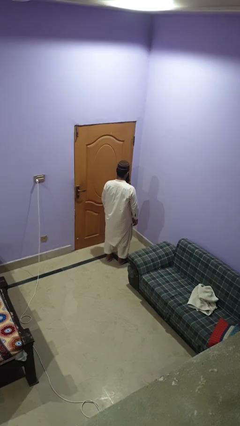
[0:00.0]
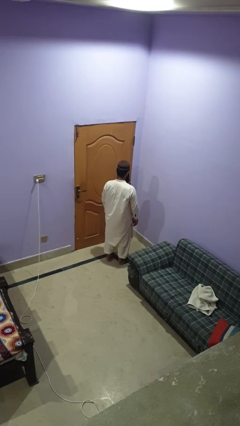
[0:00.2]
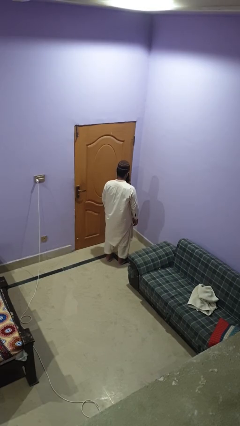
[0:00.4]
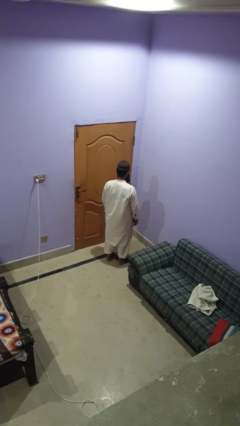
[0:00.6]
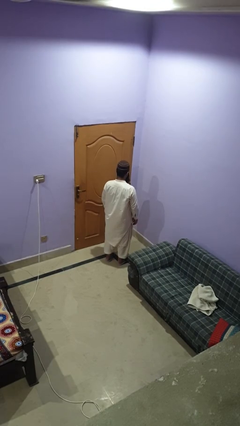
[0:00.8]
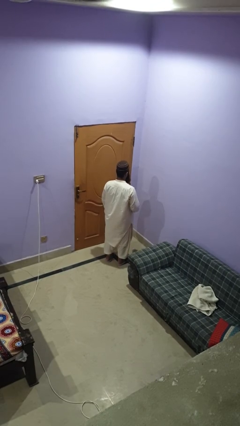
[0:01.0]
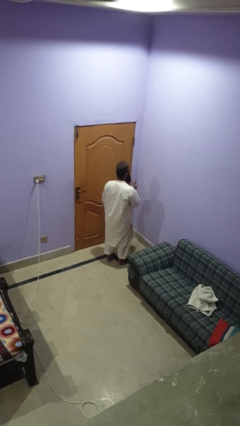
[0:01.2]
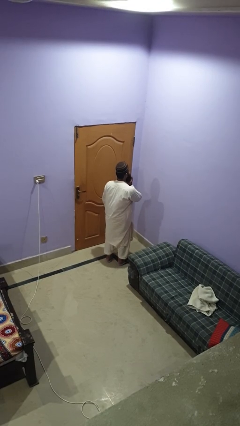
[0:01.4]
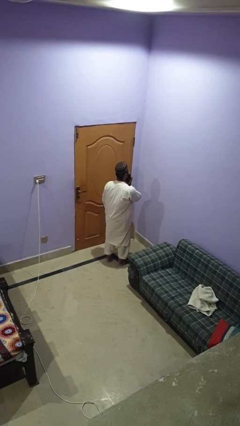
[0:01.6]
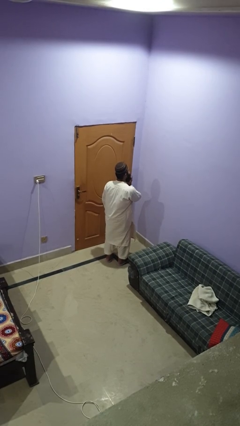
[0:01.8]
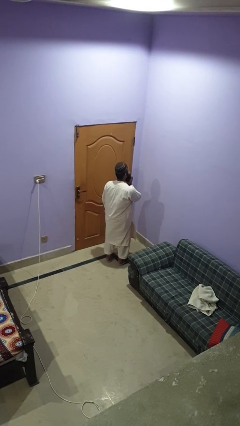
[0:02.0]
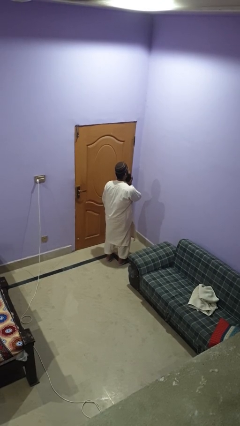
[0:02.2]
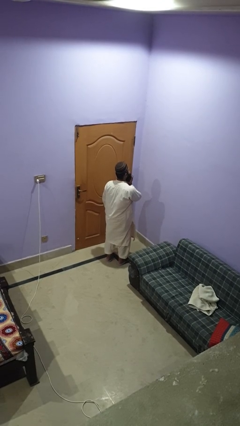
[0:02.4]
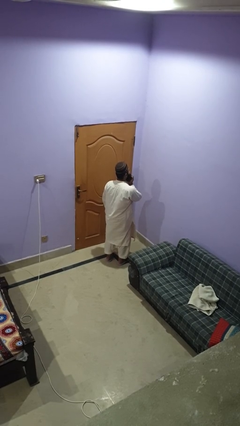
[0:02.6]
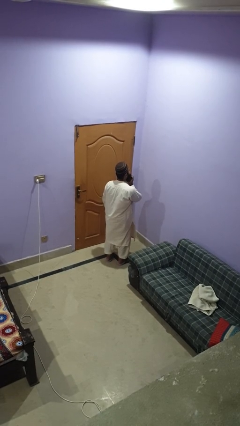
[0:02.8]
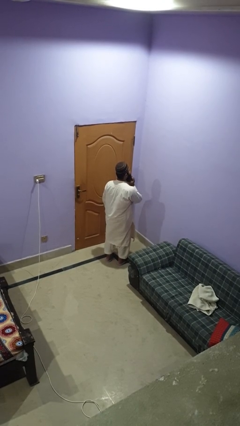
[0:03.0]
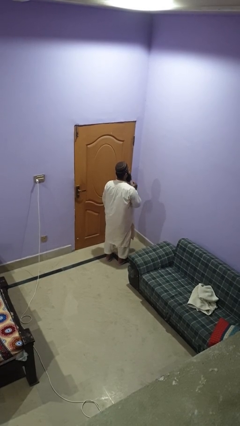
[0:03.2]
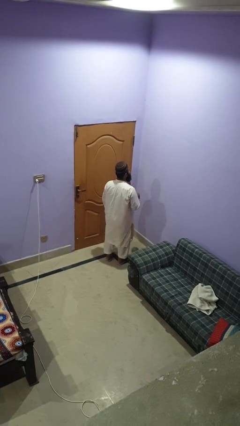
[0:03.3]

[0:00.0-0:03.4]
person strokes chin

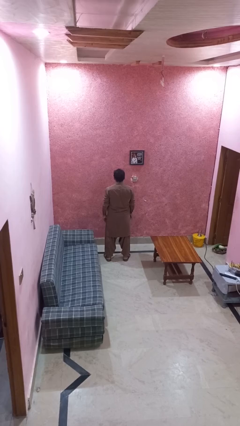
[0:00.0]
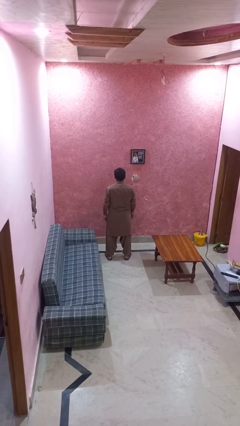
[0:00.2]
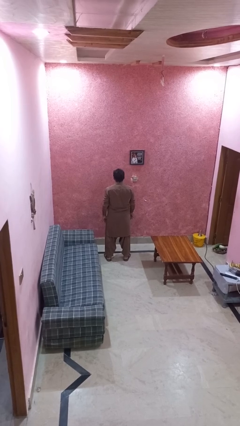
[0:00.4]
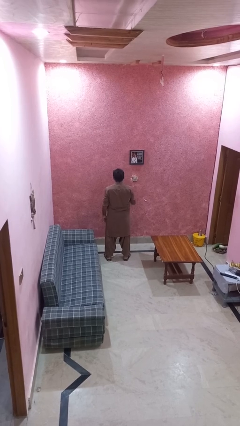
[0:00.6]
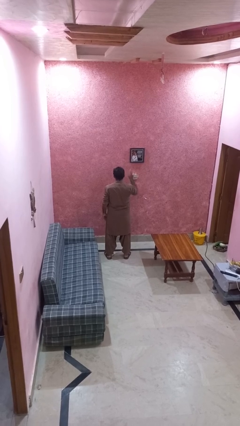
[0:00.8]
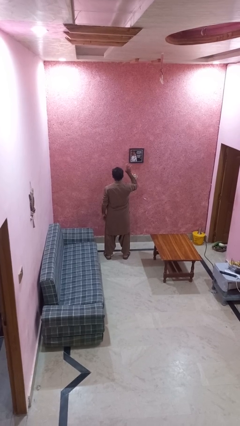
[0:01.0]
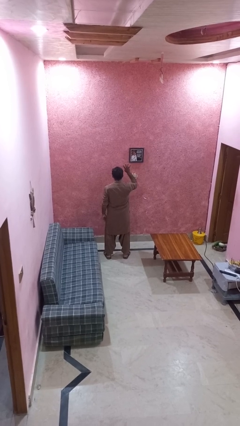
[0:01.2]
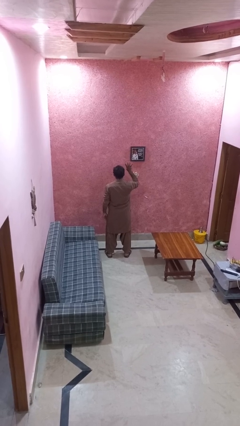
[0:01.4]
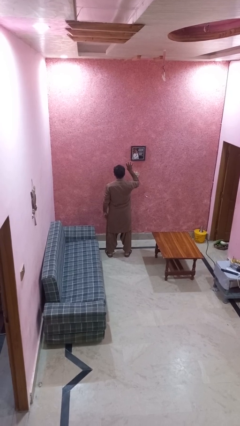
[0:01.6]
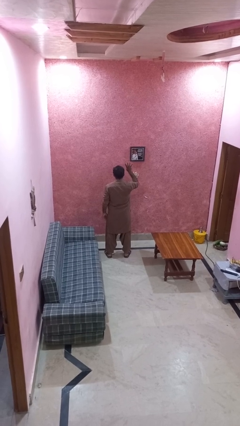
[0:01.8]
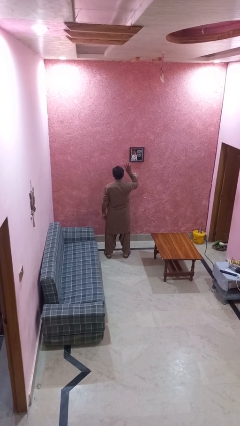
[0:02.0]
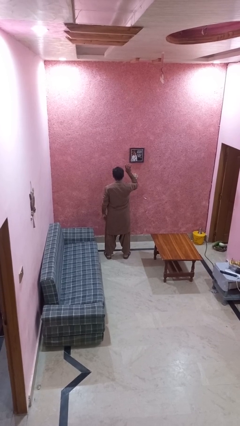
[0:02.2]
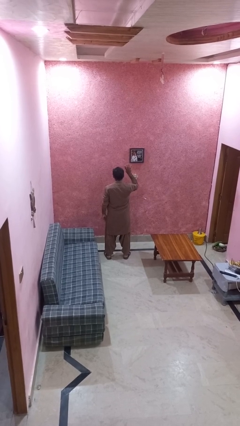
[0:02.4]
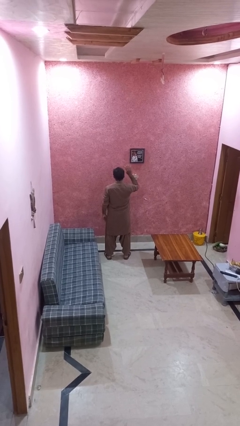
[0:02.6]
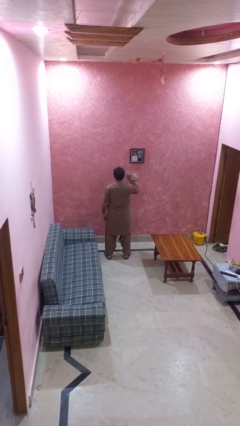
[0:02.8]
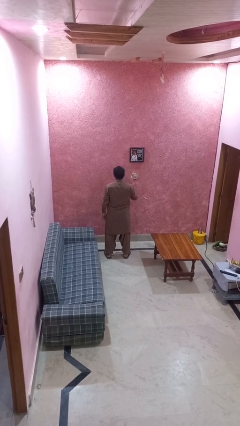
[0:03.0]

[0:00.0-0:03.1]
person gestures number four

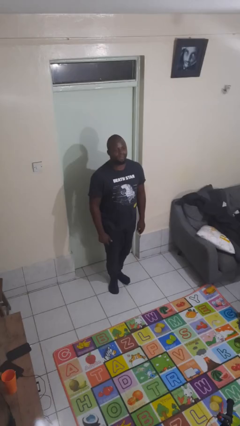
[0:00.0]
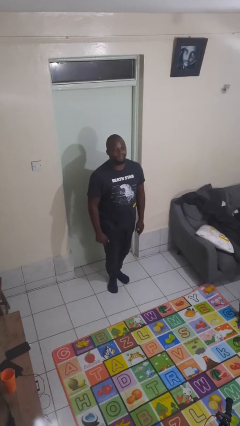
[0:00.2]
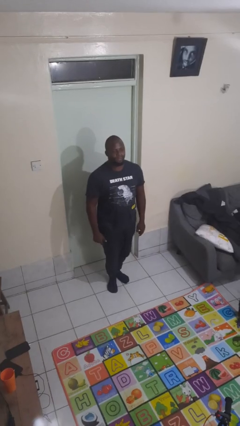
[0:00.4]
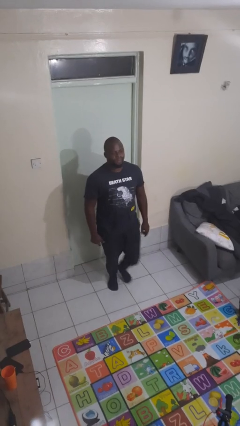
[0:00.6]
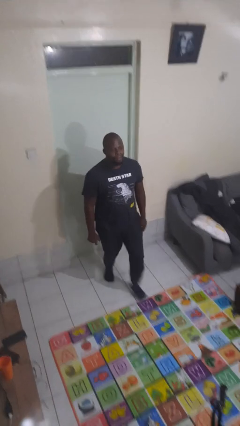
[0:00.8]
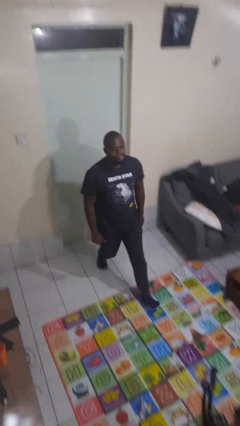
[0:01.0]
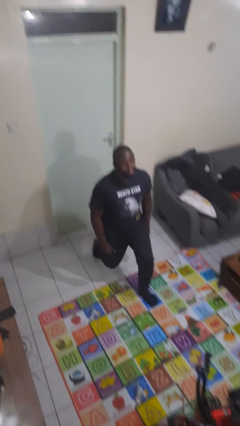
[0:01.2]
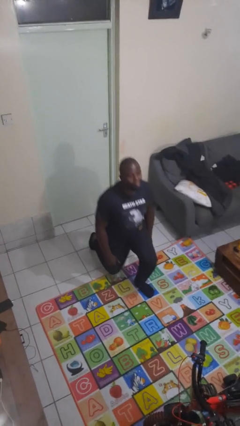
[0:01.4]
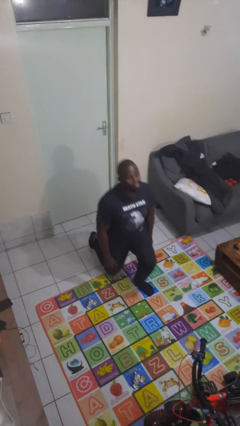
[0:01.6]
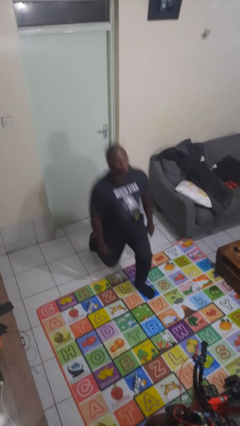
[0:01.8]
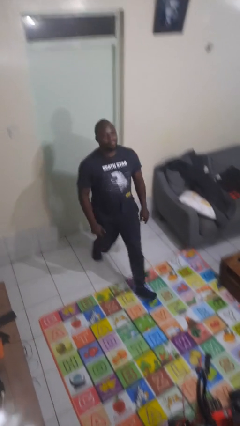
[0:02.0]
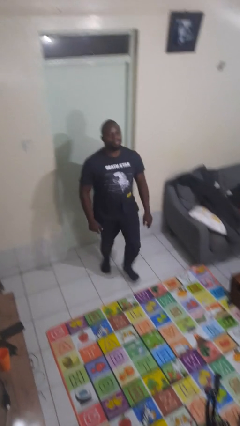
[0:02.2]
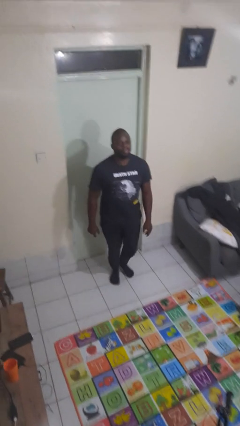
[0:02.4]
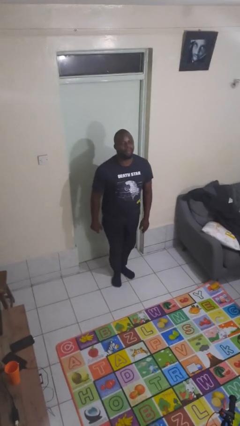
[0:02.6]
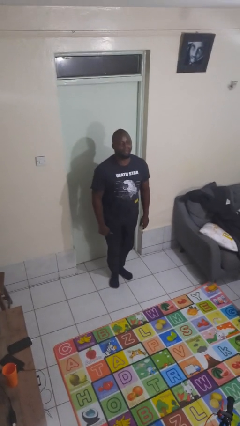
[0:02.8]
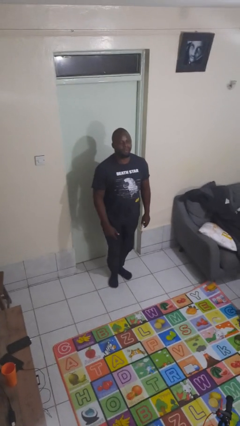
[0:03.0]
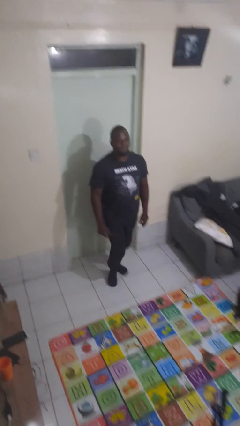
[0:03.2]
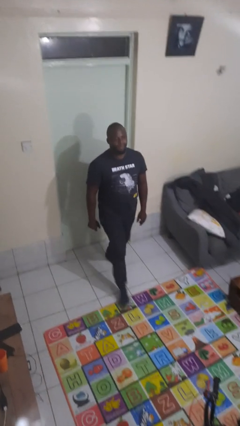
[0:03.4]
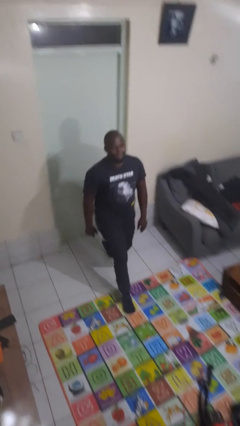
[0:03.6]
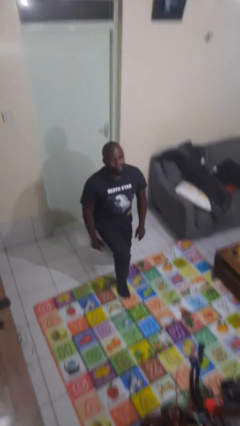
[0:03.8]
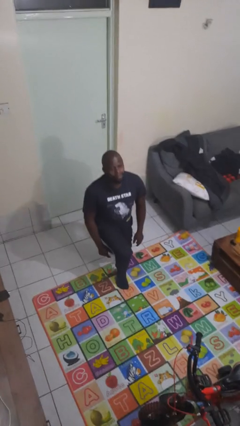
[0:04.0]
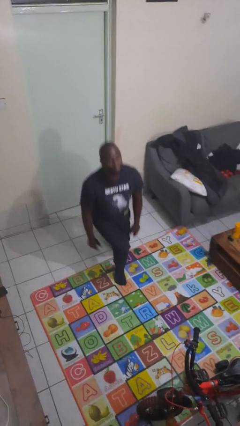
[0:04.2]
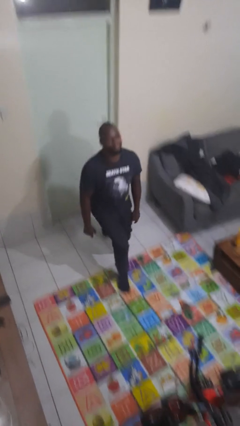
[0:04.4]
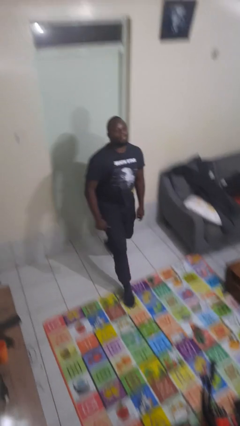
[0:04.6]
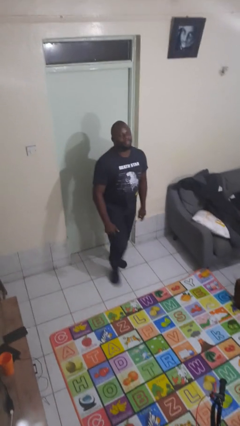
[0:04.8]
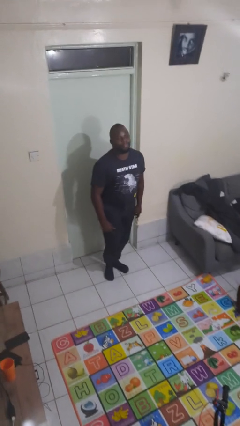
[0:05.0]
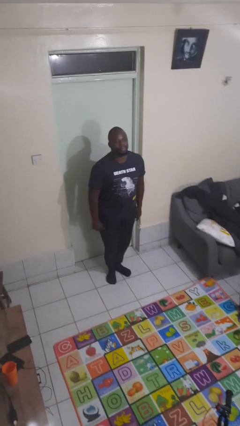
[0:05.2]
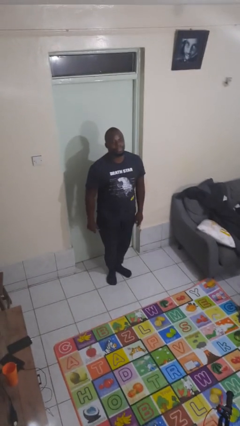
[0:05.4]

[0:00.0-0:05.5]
person exercises with lunges

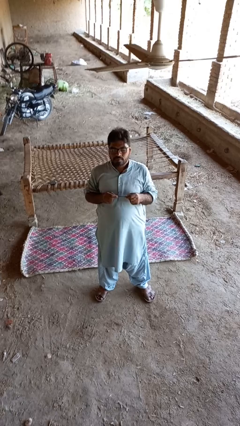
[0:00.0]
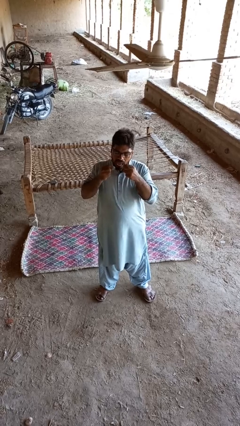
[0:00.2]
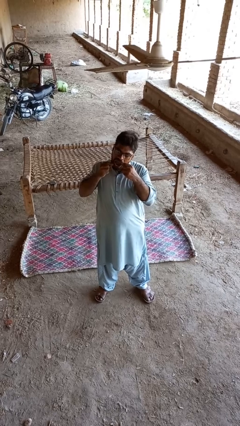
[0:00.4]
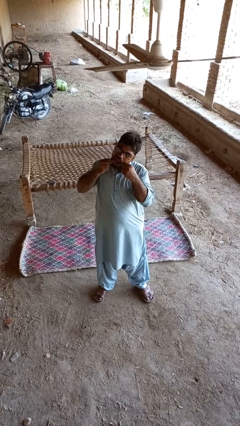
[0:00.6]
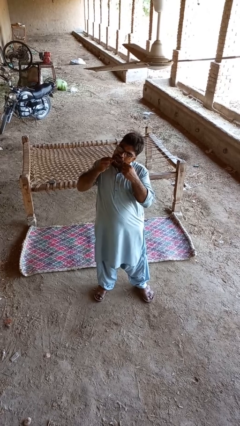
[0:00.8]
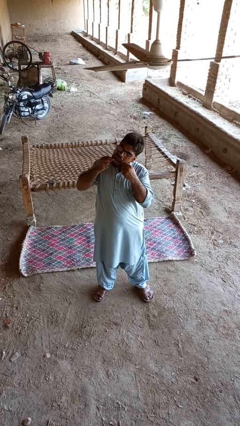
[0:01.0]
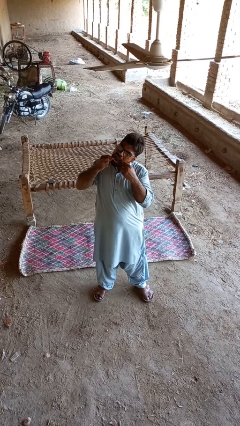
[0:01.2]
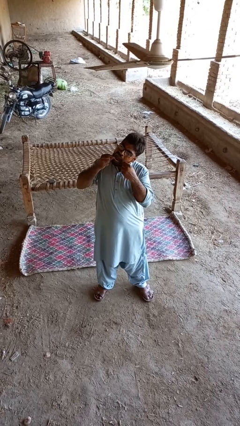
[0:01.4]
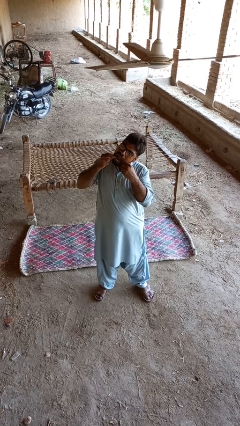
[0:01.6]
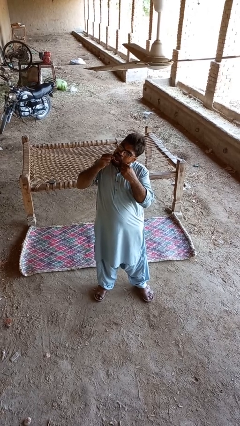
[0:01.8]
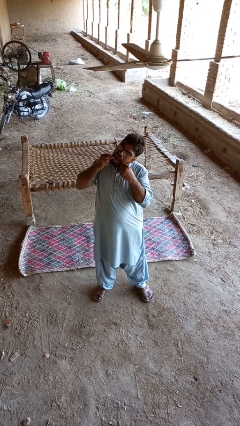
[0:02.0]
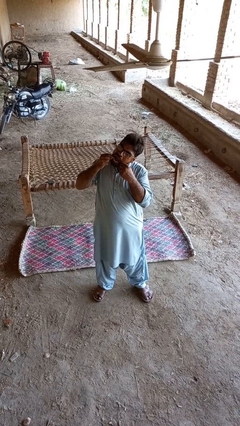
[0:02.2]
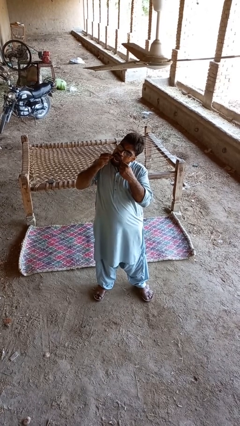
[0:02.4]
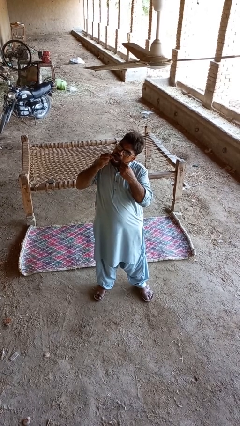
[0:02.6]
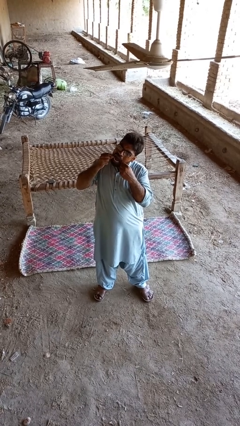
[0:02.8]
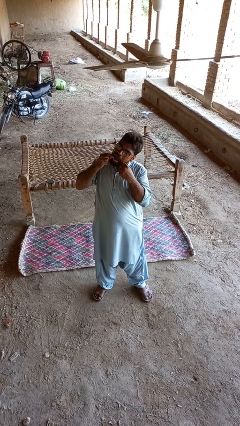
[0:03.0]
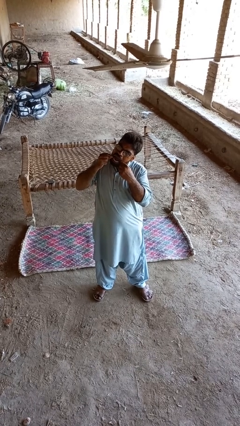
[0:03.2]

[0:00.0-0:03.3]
person flosses

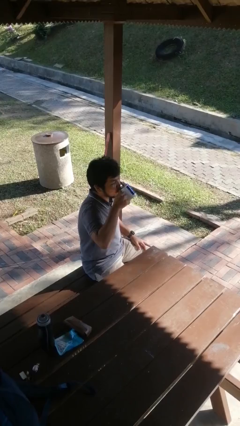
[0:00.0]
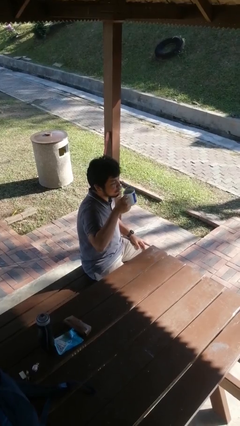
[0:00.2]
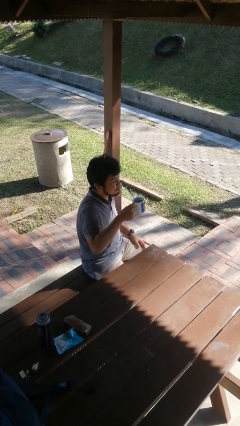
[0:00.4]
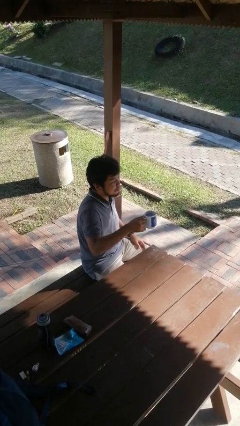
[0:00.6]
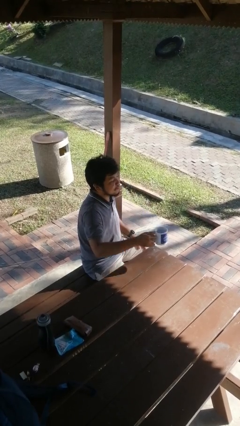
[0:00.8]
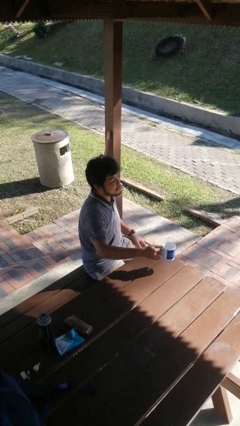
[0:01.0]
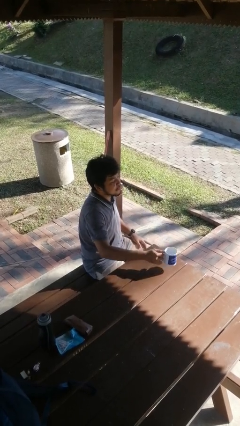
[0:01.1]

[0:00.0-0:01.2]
person puts down object on table

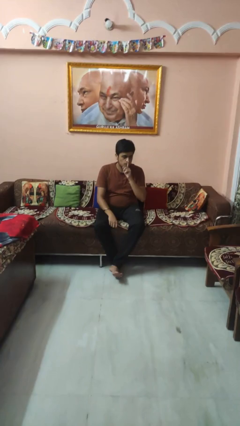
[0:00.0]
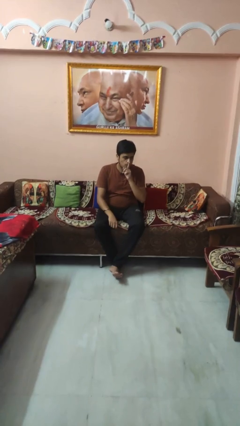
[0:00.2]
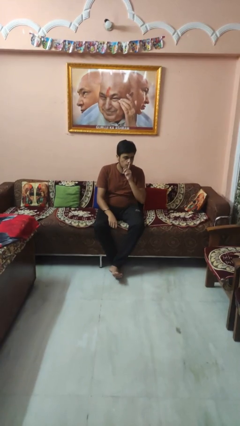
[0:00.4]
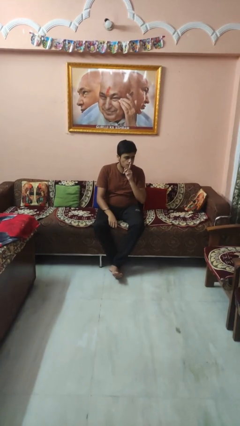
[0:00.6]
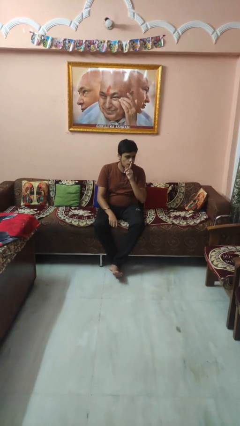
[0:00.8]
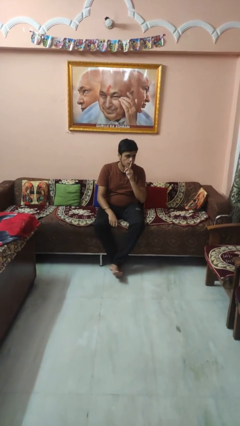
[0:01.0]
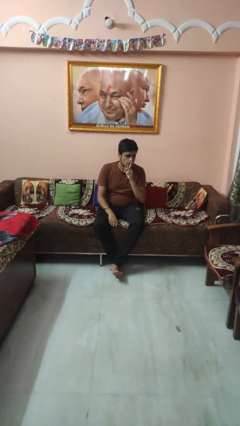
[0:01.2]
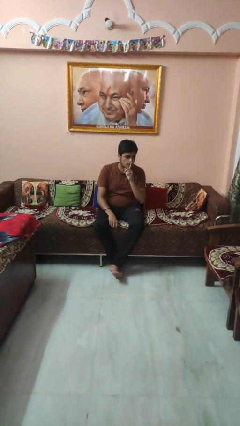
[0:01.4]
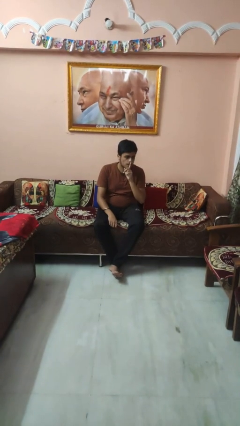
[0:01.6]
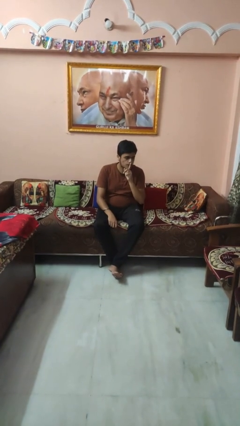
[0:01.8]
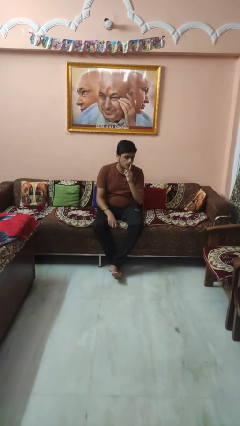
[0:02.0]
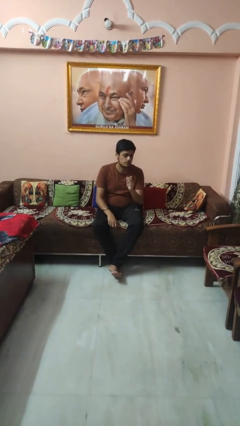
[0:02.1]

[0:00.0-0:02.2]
person gestures be quiet
